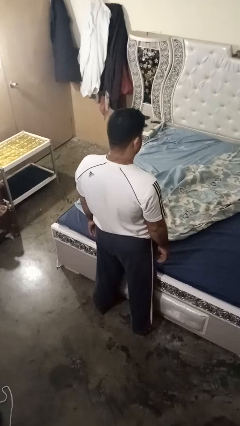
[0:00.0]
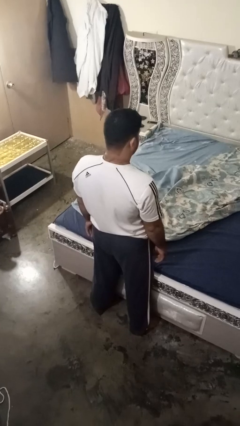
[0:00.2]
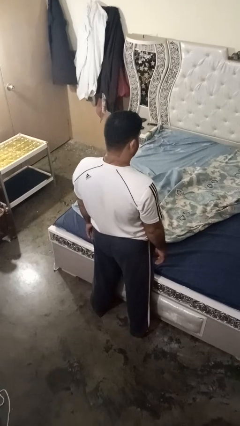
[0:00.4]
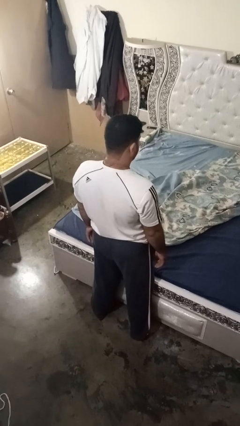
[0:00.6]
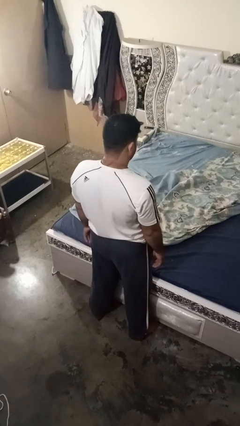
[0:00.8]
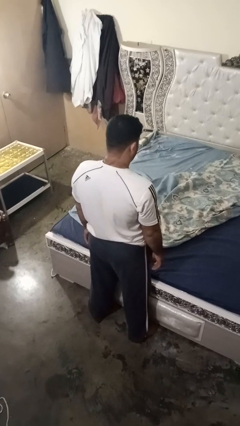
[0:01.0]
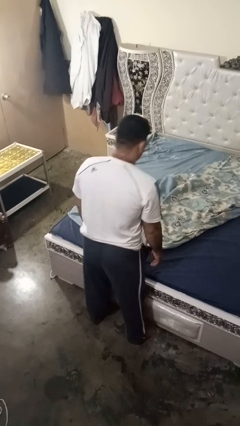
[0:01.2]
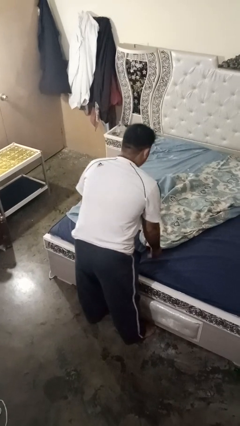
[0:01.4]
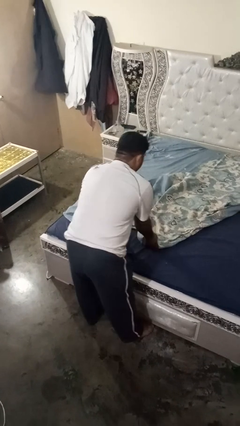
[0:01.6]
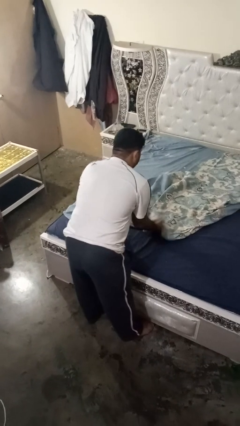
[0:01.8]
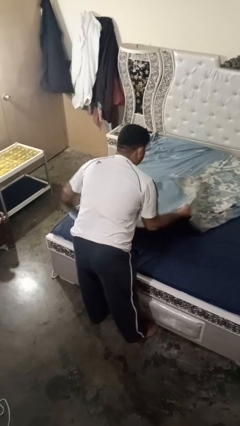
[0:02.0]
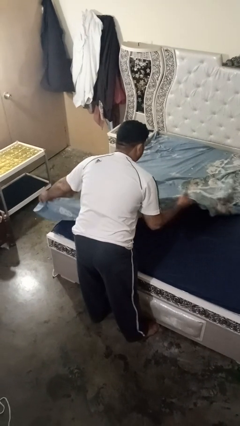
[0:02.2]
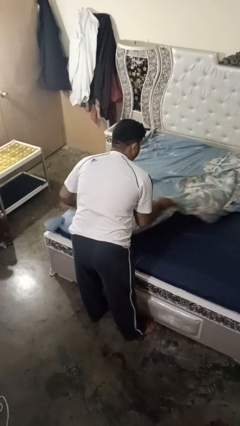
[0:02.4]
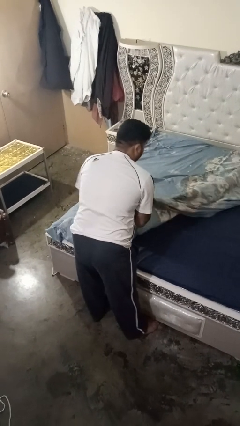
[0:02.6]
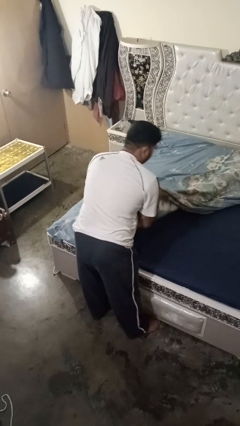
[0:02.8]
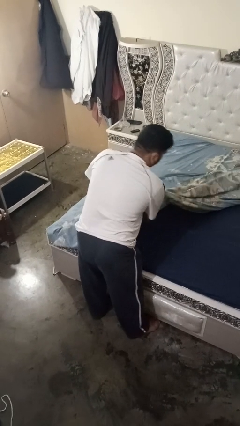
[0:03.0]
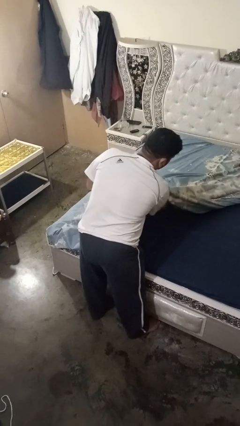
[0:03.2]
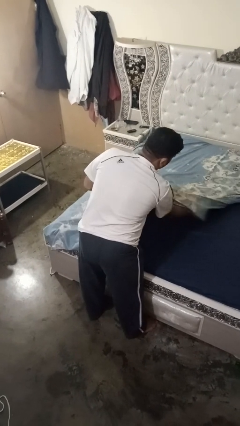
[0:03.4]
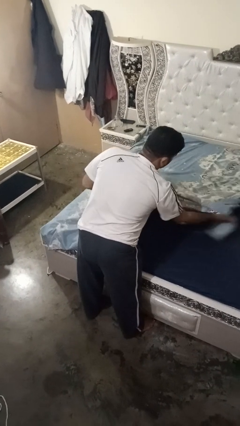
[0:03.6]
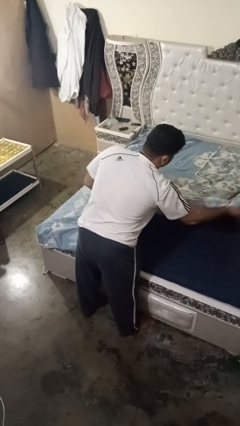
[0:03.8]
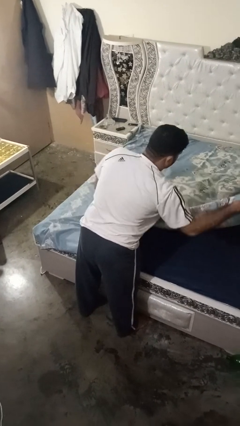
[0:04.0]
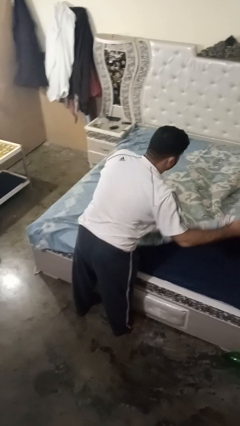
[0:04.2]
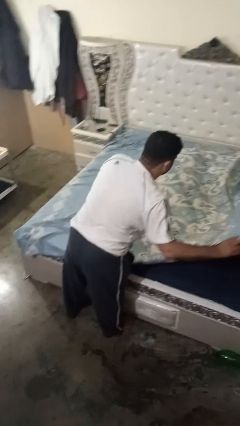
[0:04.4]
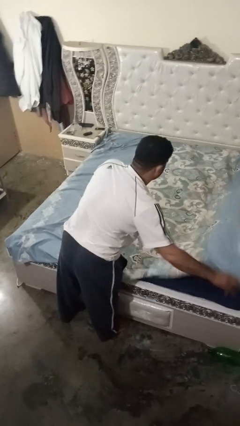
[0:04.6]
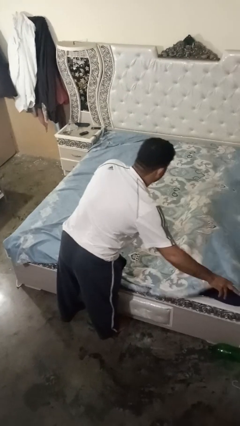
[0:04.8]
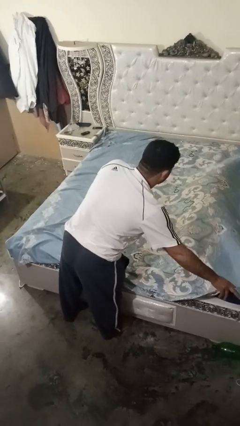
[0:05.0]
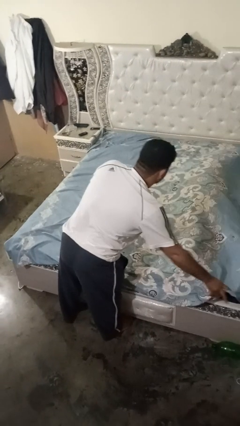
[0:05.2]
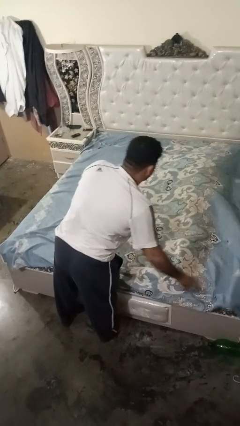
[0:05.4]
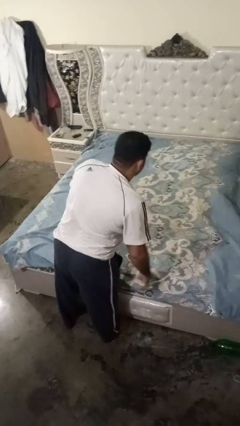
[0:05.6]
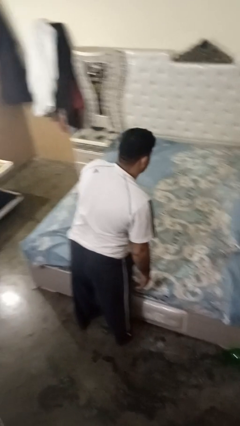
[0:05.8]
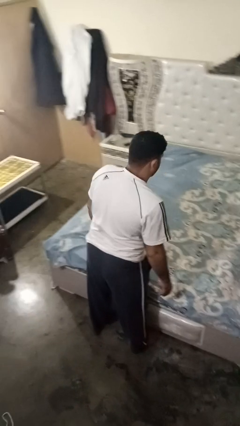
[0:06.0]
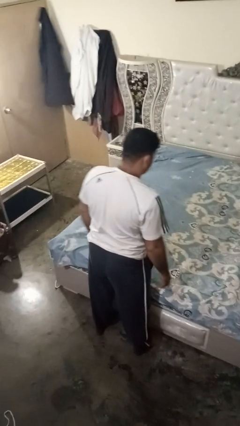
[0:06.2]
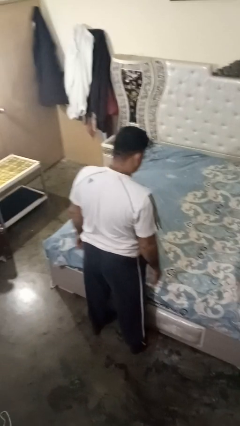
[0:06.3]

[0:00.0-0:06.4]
person makes bed

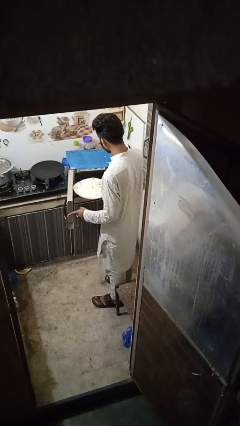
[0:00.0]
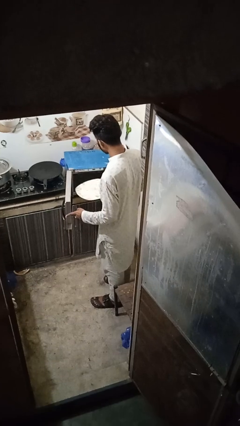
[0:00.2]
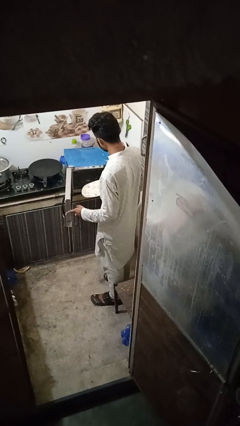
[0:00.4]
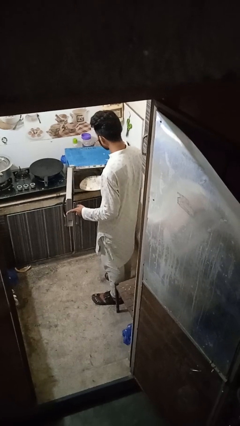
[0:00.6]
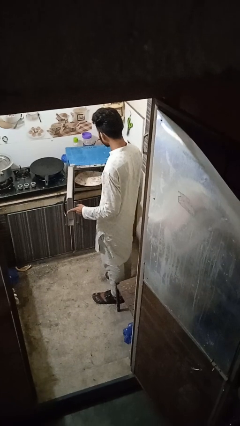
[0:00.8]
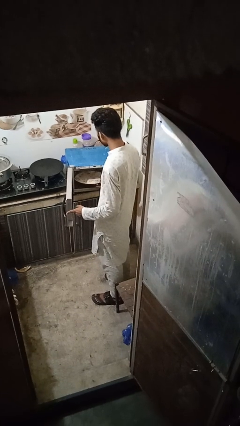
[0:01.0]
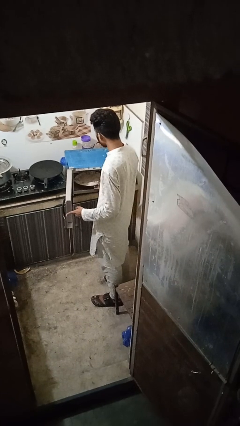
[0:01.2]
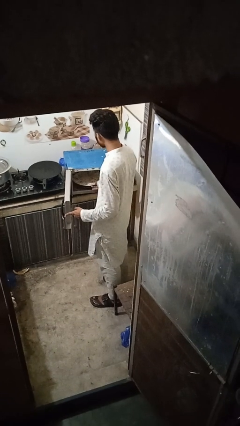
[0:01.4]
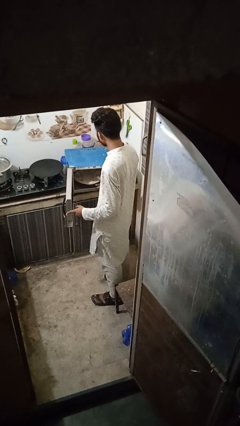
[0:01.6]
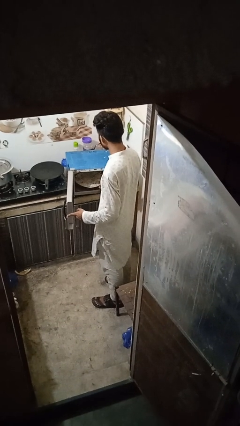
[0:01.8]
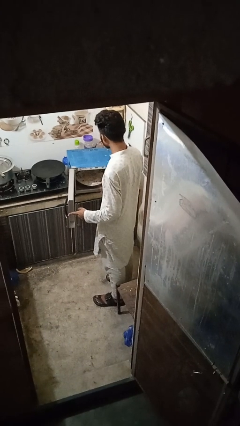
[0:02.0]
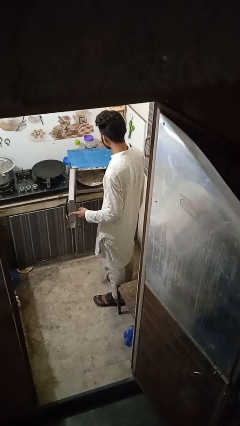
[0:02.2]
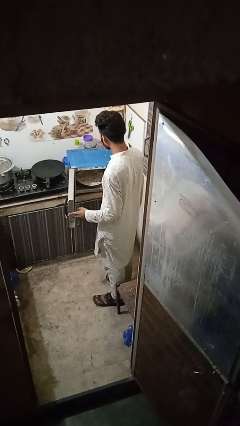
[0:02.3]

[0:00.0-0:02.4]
person puts object into oven

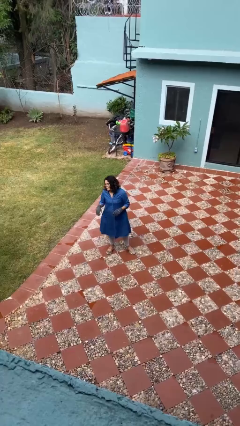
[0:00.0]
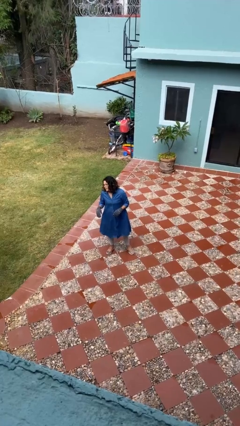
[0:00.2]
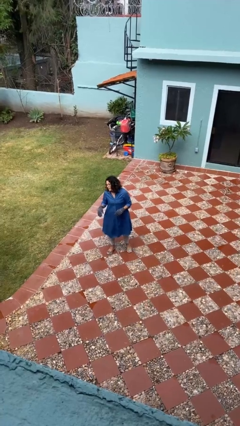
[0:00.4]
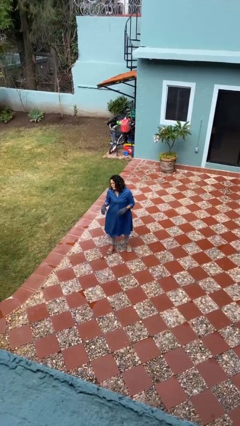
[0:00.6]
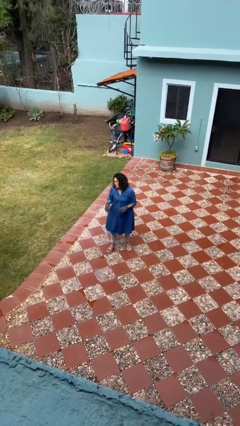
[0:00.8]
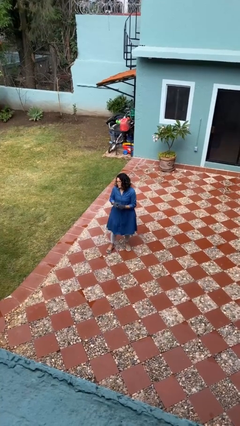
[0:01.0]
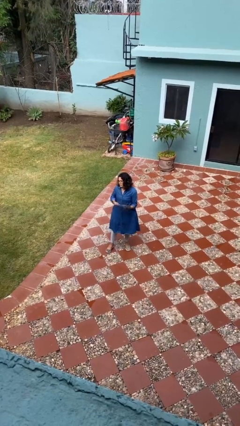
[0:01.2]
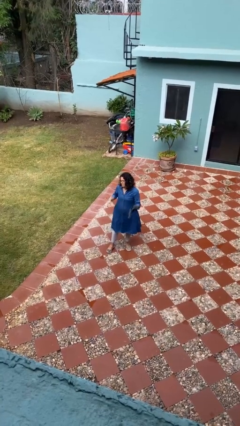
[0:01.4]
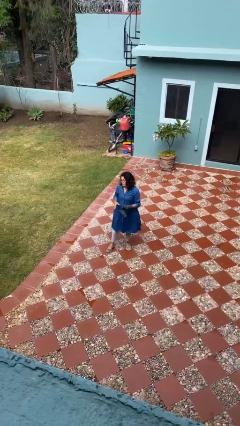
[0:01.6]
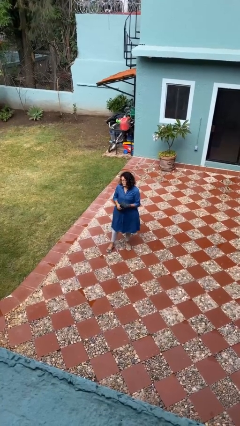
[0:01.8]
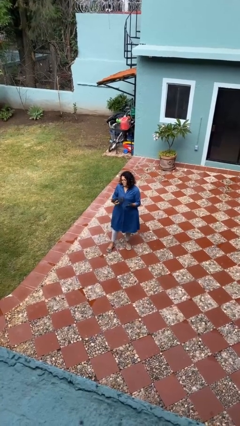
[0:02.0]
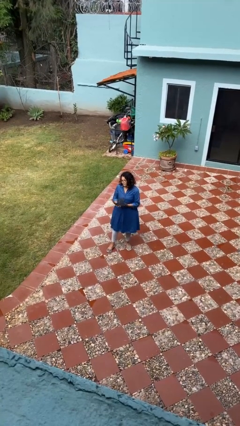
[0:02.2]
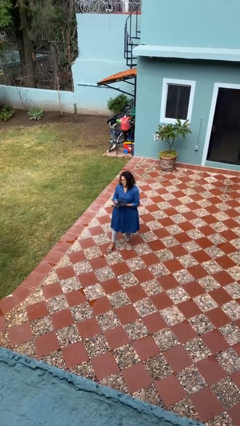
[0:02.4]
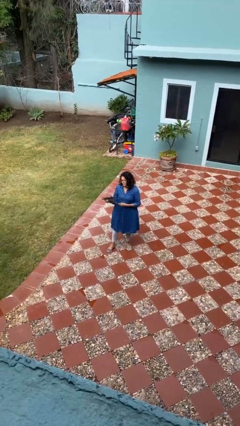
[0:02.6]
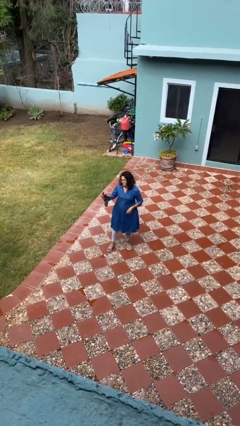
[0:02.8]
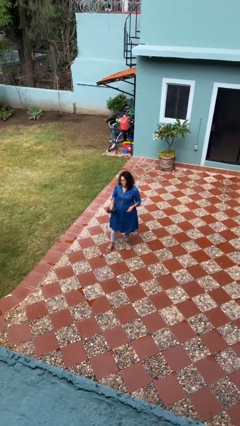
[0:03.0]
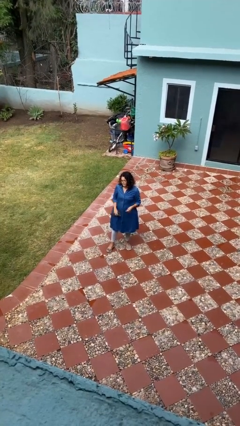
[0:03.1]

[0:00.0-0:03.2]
person takes off gloves

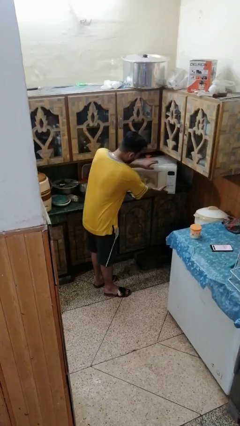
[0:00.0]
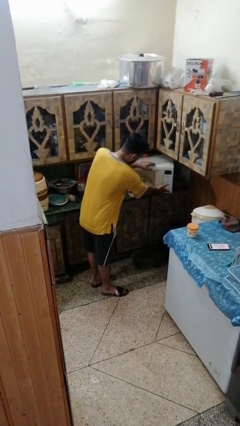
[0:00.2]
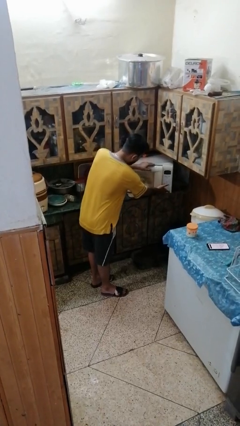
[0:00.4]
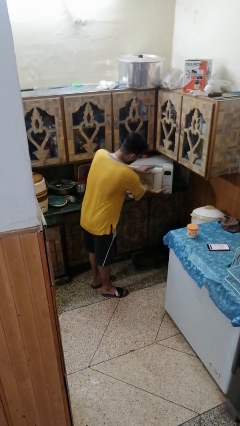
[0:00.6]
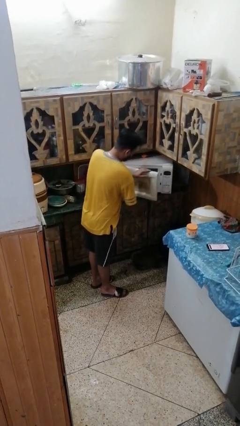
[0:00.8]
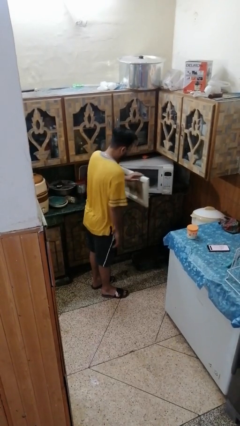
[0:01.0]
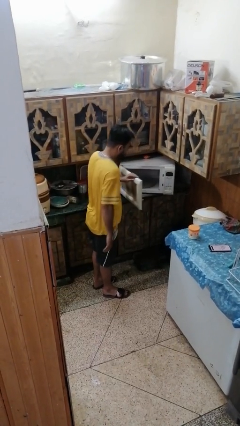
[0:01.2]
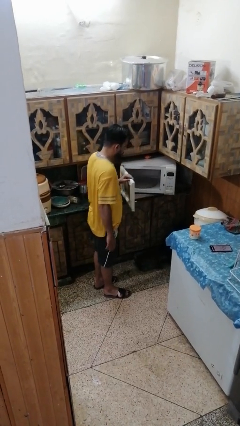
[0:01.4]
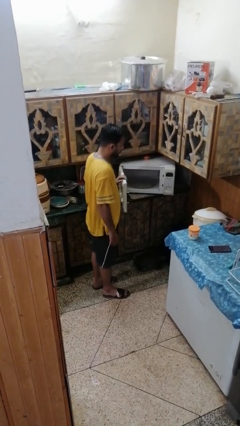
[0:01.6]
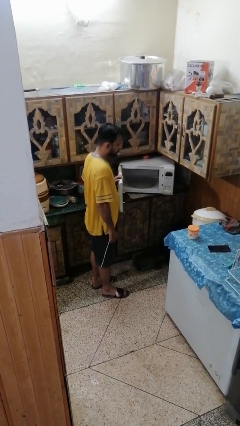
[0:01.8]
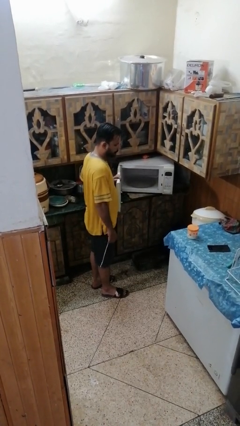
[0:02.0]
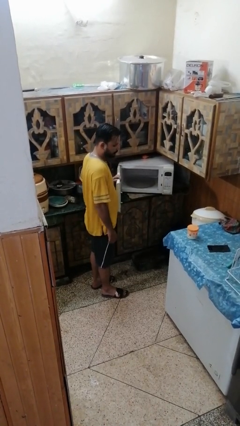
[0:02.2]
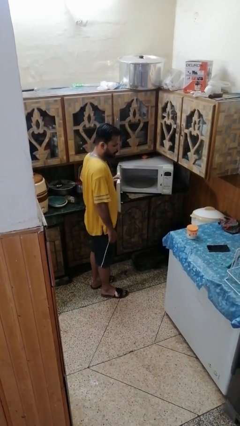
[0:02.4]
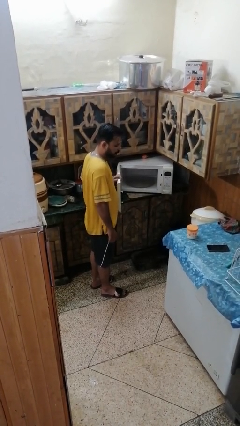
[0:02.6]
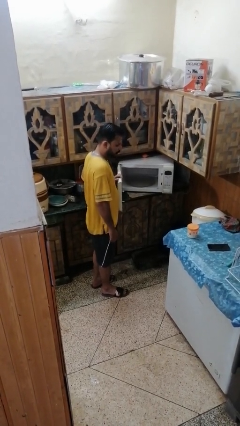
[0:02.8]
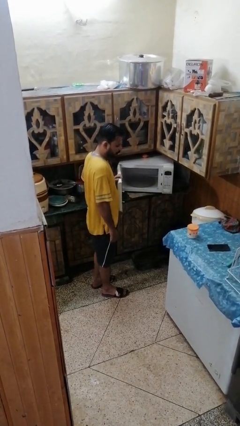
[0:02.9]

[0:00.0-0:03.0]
person opens refrigerator

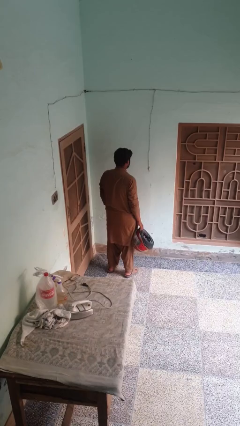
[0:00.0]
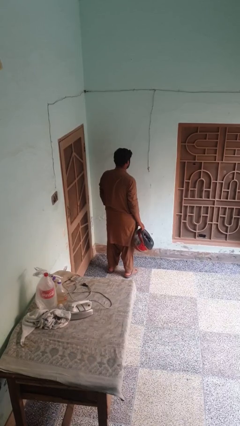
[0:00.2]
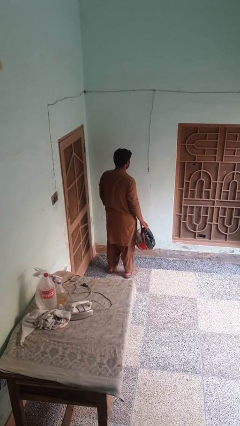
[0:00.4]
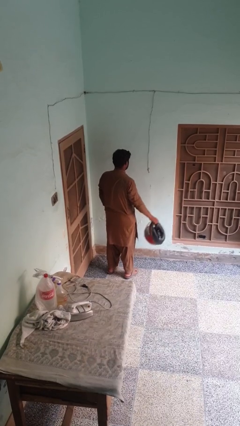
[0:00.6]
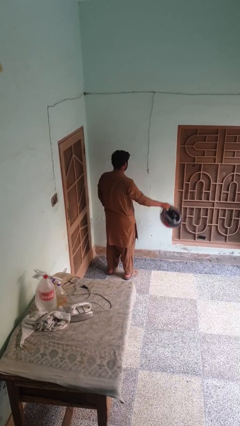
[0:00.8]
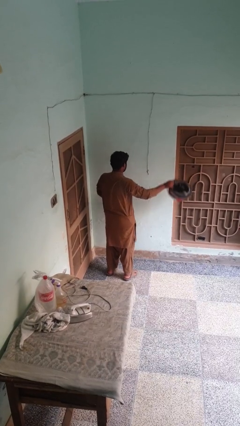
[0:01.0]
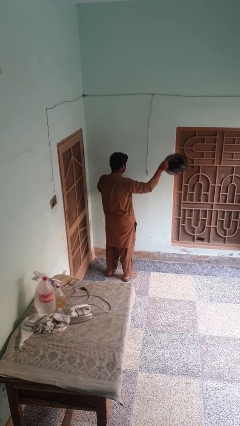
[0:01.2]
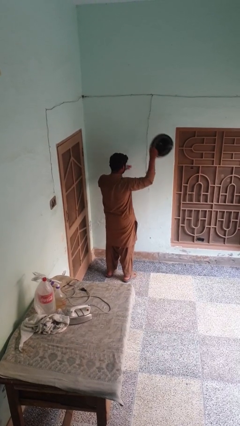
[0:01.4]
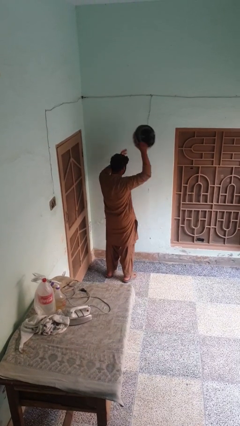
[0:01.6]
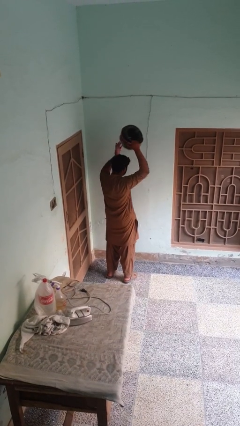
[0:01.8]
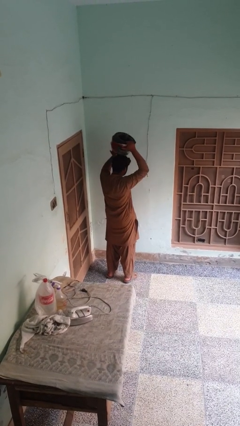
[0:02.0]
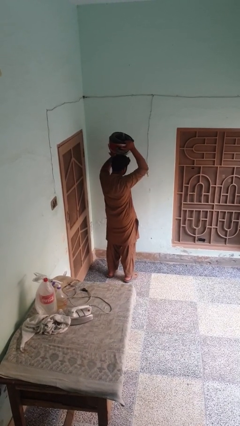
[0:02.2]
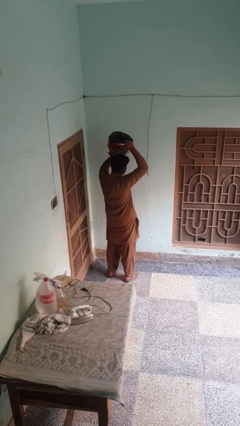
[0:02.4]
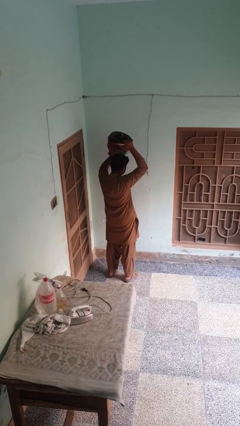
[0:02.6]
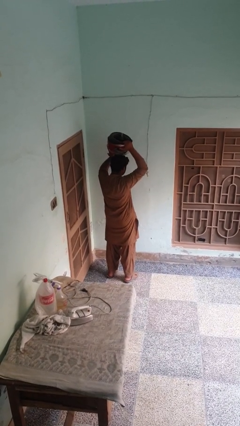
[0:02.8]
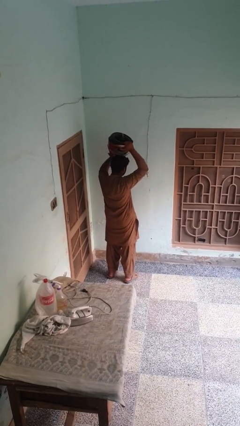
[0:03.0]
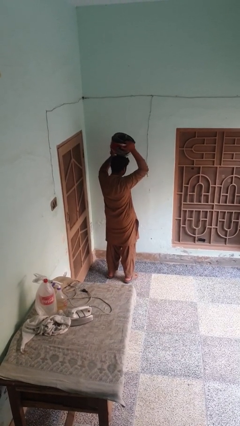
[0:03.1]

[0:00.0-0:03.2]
person holds object above head
